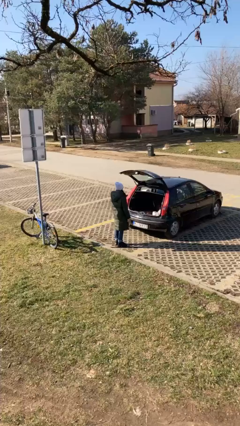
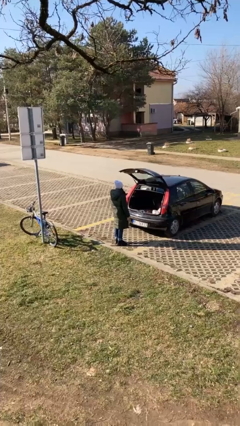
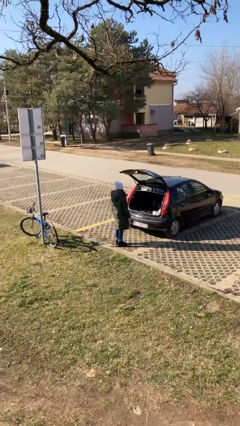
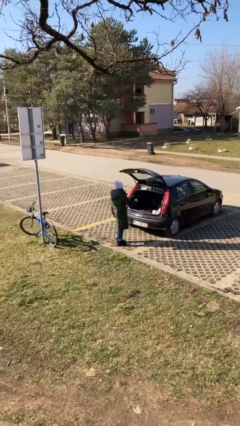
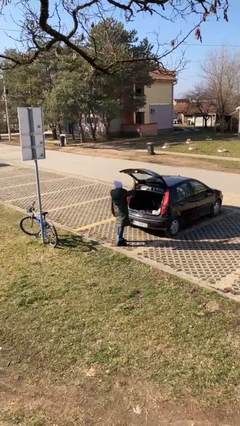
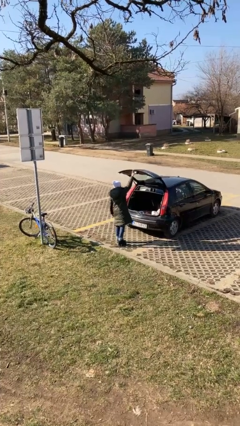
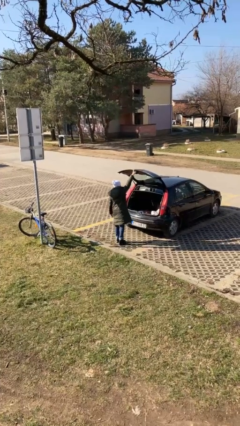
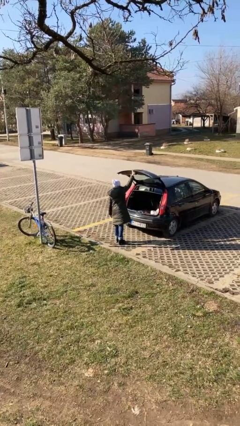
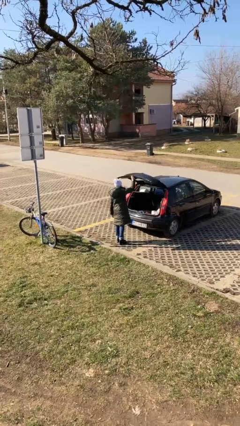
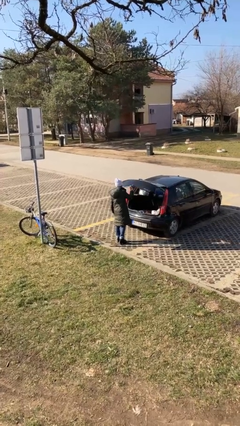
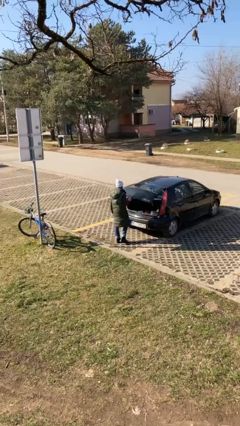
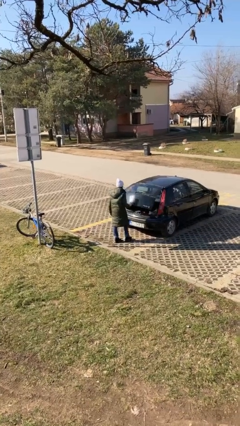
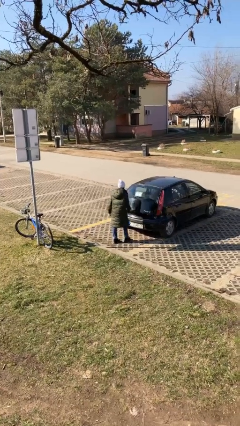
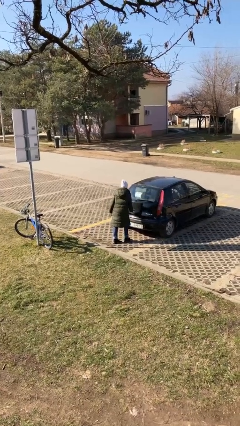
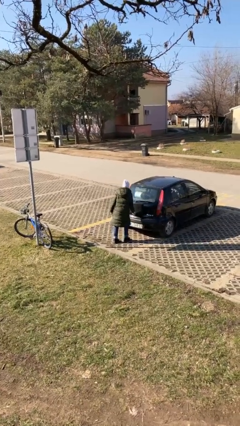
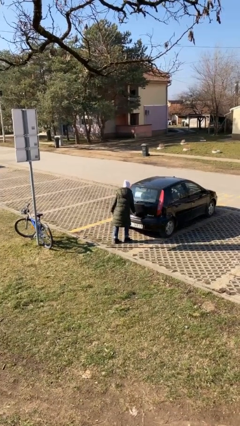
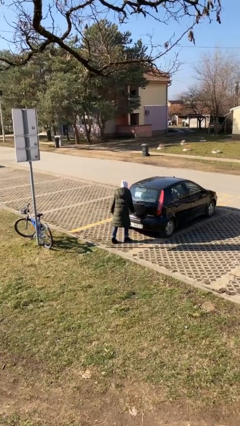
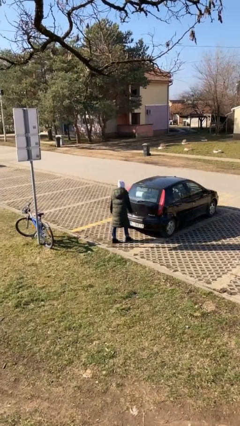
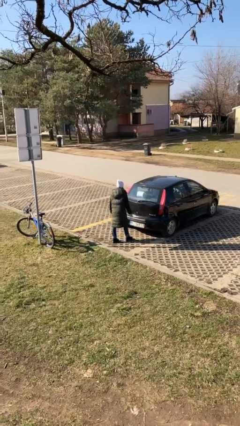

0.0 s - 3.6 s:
person closes car trunk

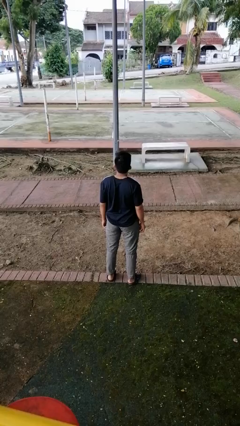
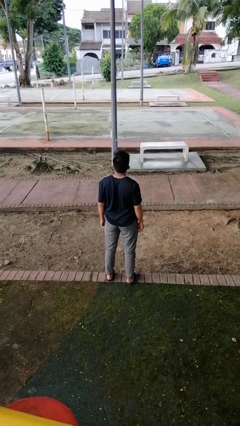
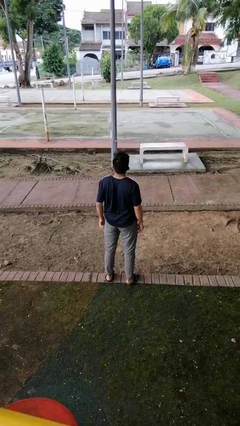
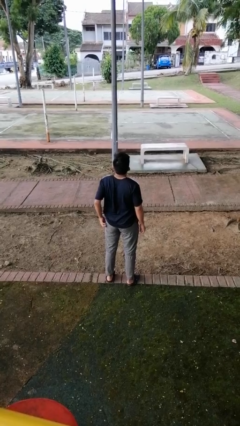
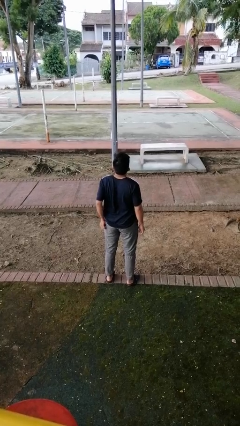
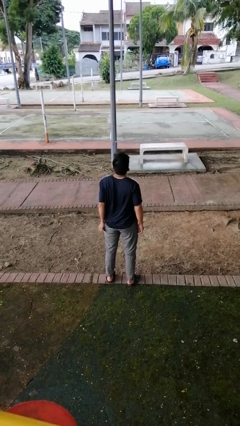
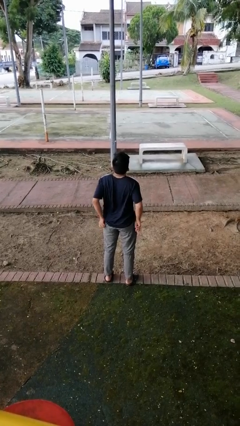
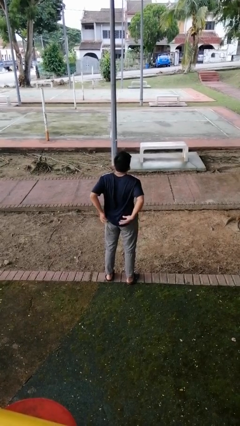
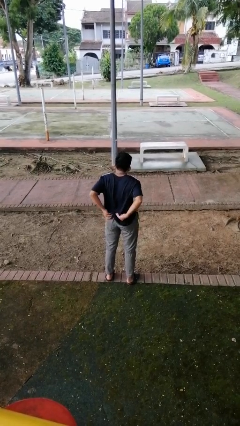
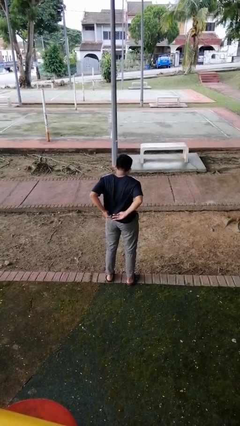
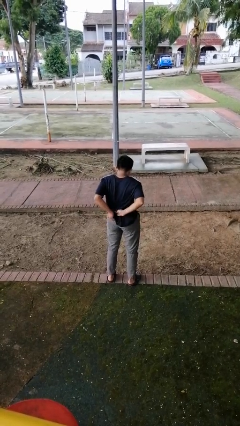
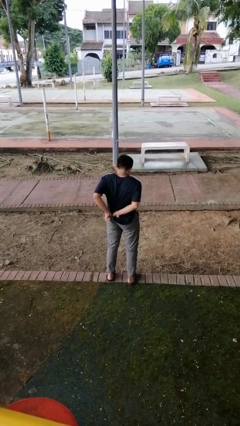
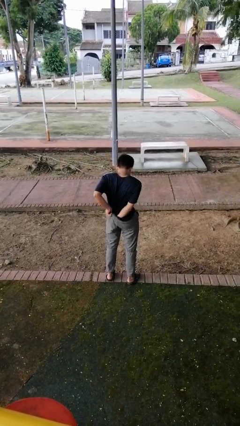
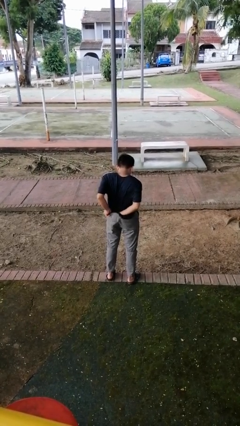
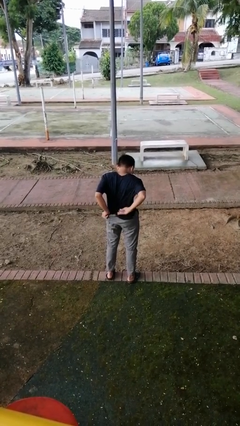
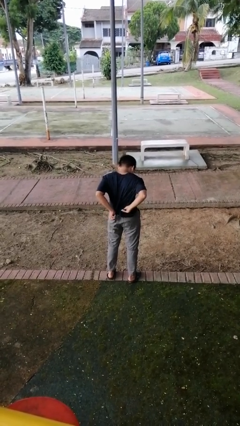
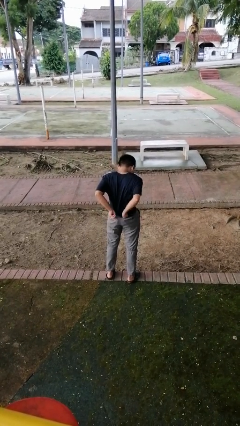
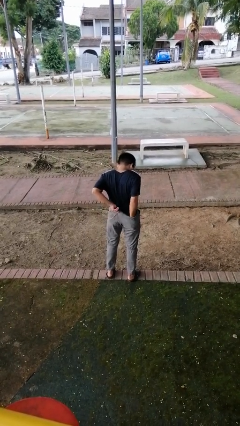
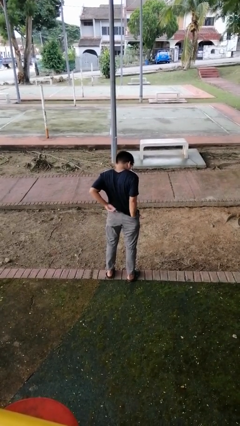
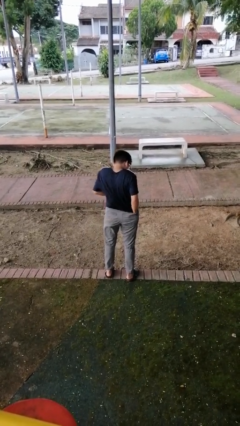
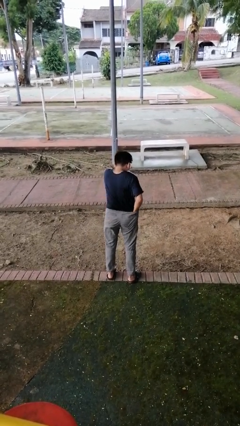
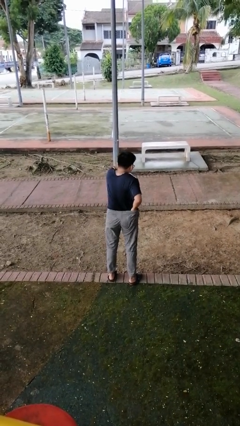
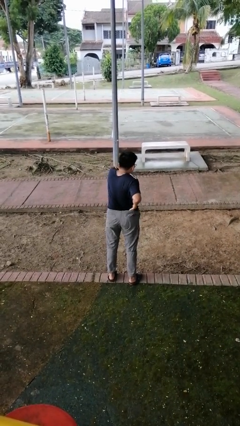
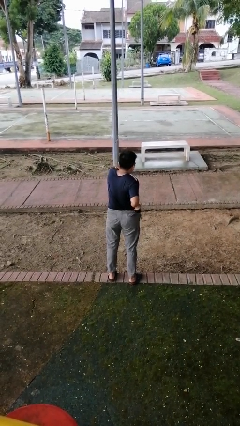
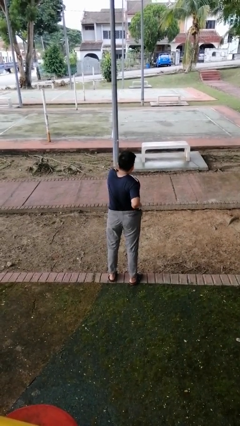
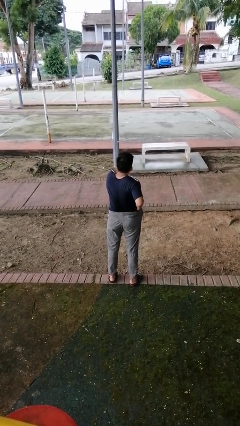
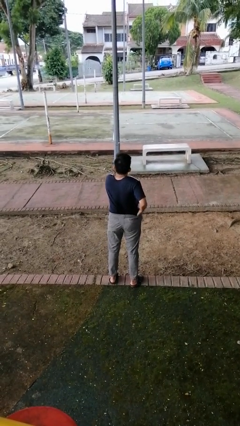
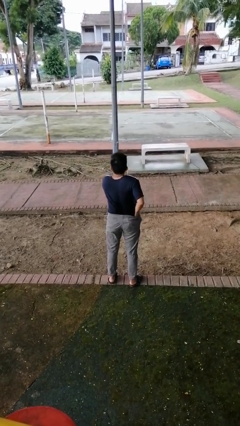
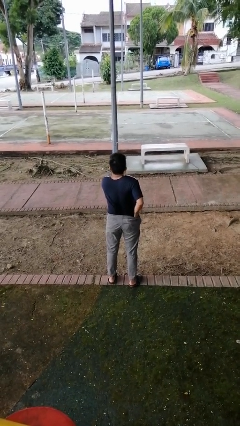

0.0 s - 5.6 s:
person tucks in shirt

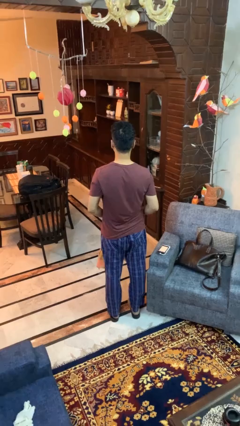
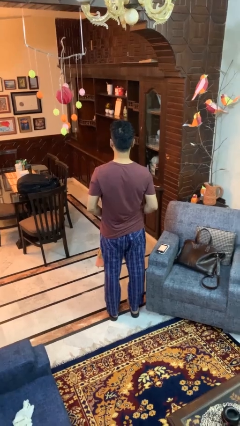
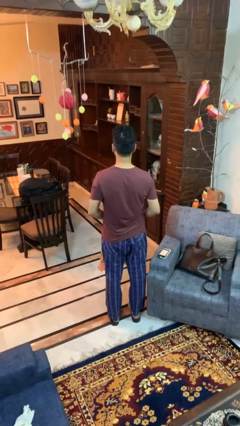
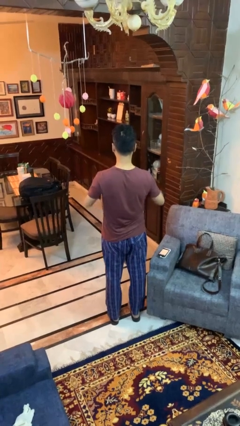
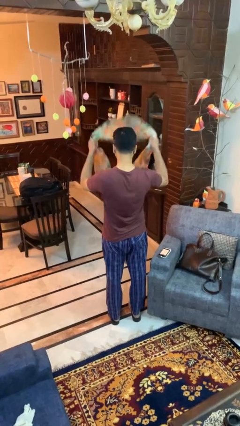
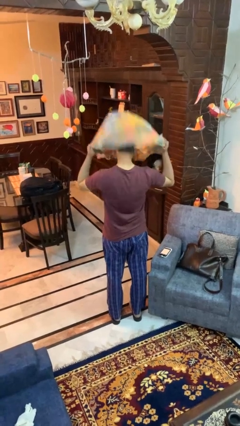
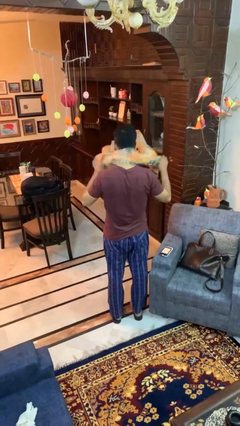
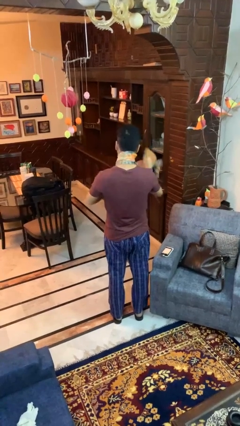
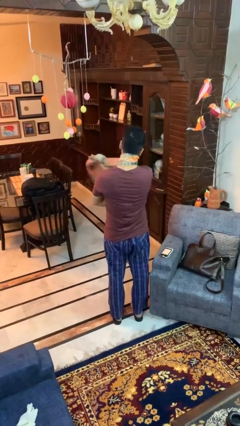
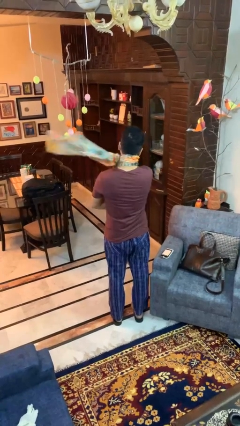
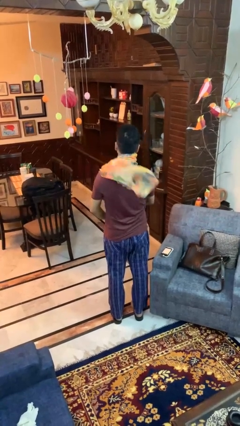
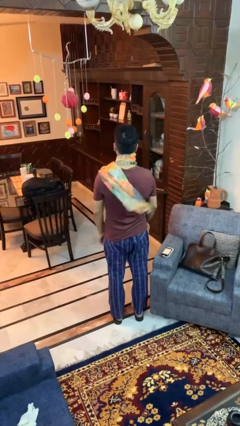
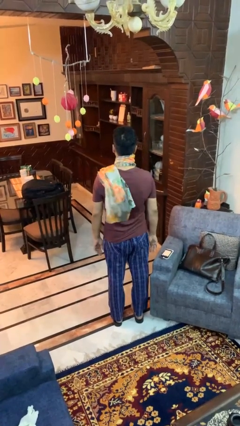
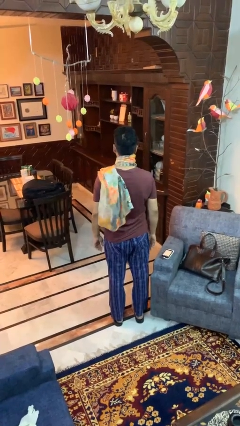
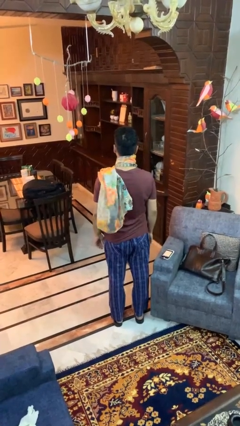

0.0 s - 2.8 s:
person puts on scarf

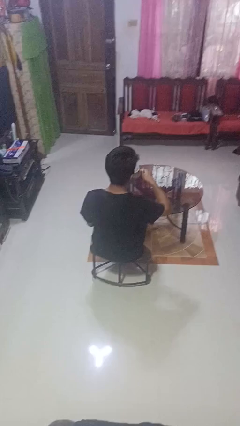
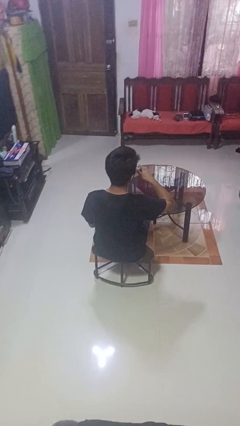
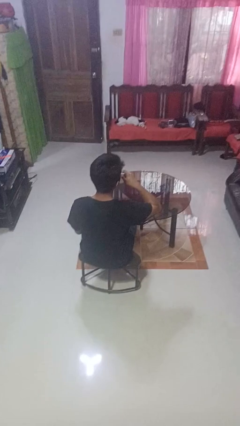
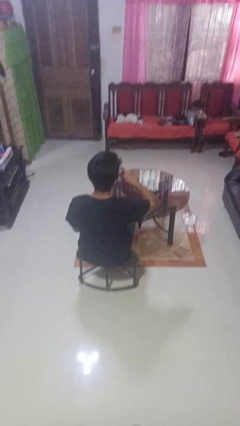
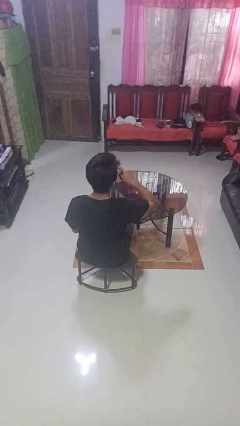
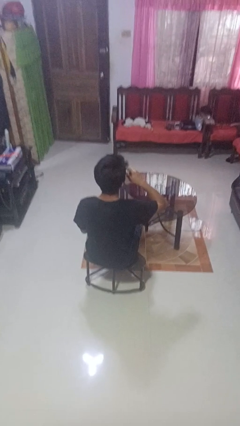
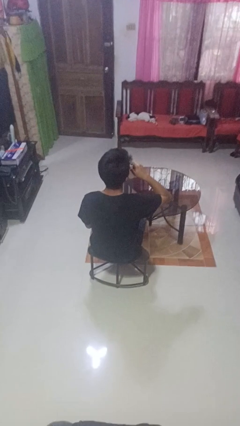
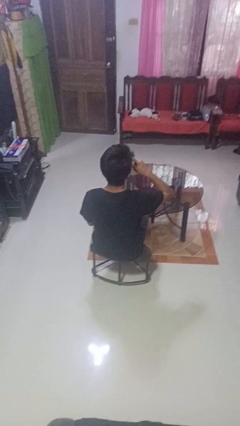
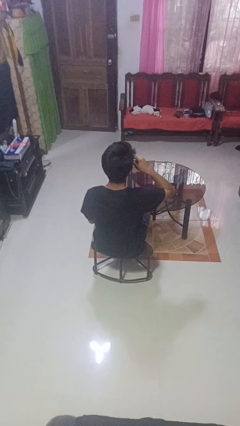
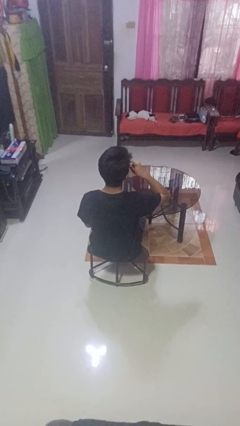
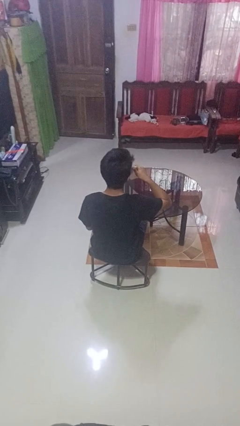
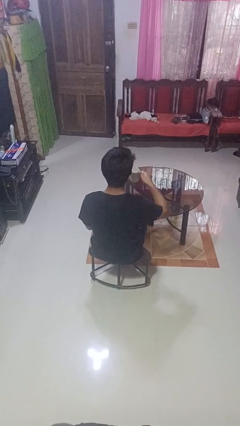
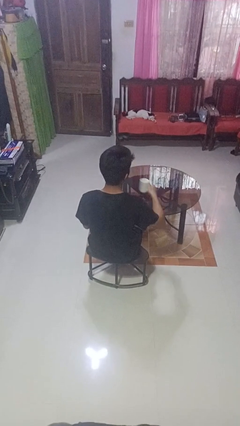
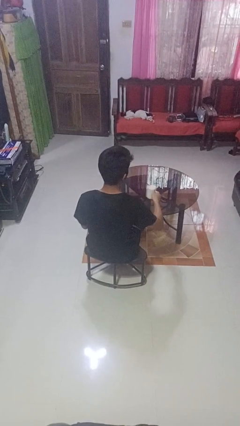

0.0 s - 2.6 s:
person drinks from mug

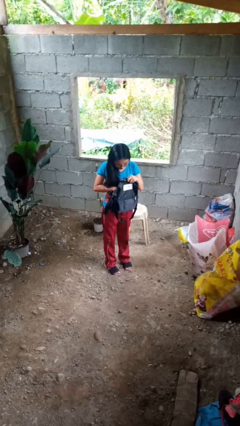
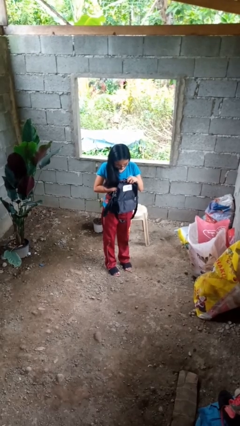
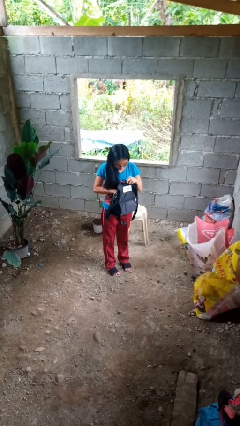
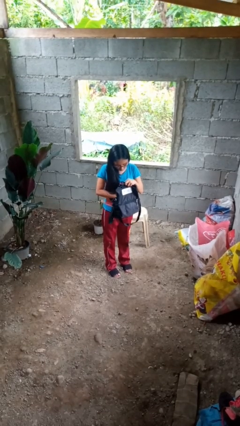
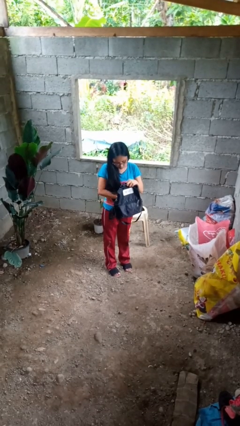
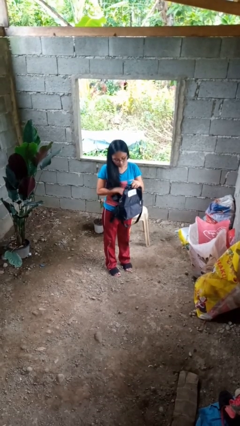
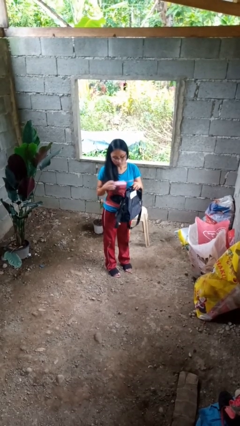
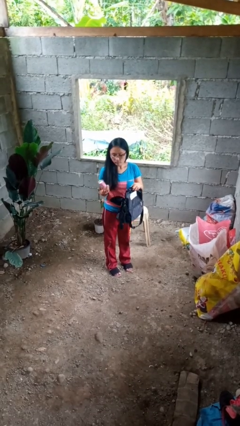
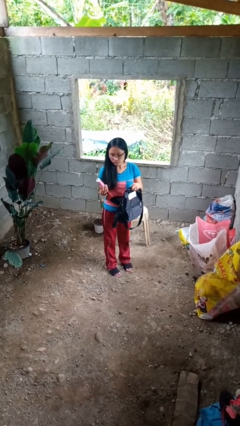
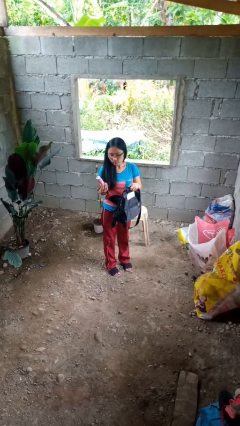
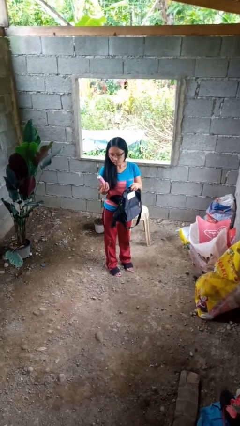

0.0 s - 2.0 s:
person takes object from backpack

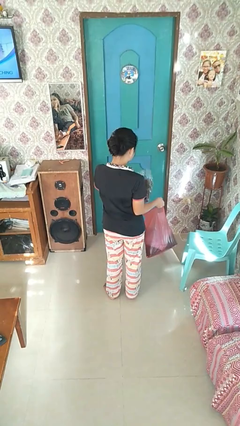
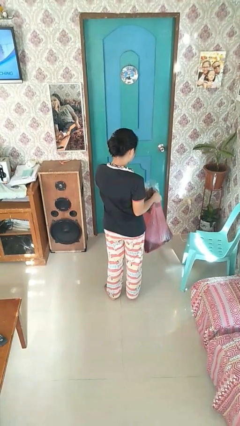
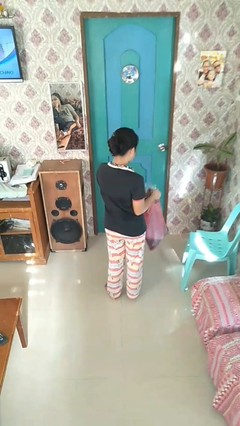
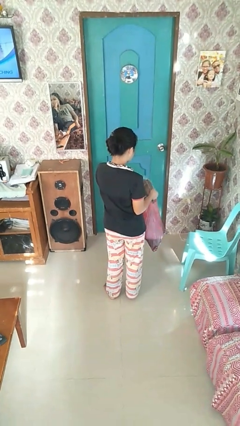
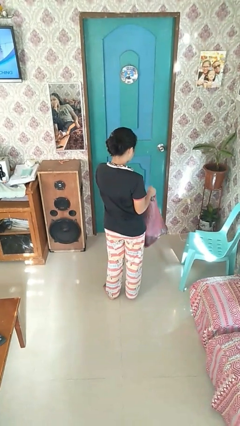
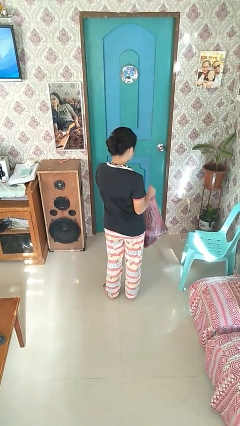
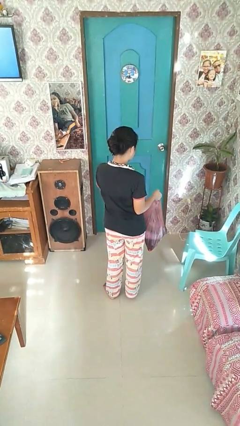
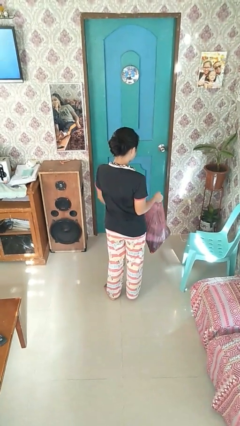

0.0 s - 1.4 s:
person puts object into bag
